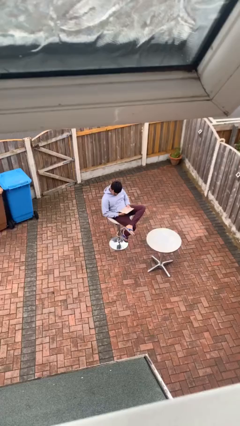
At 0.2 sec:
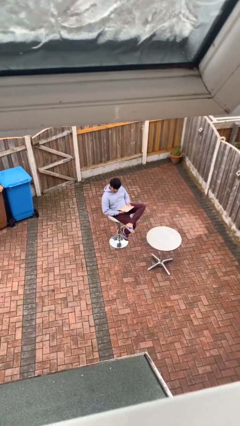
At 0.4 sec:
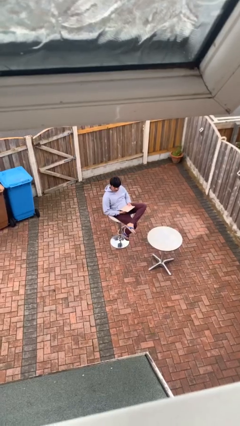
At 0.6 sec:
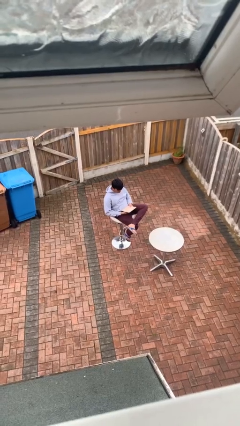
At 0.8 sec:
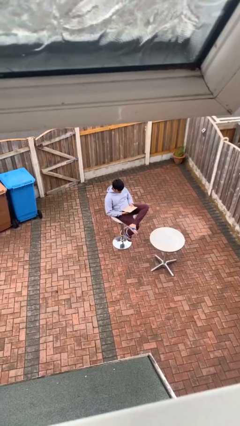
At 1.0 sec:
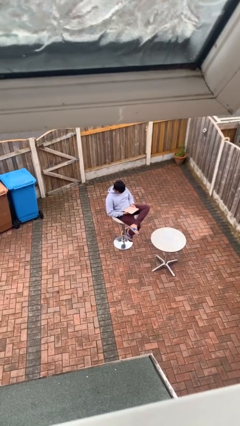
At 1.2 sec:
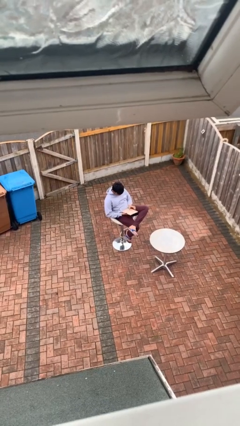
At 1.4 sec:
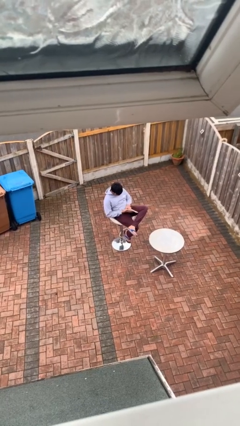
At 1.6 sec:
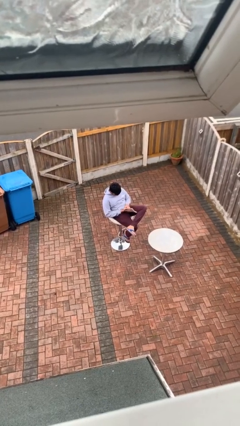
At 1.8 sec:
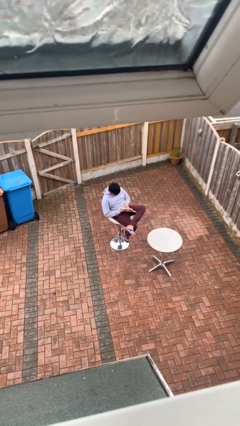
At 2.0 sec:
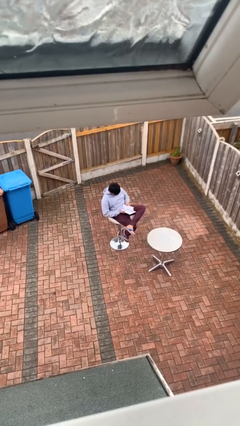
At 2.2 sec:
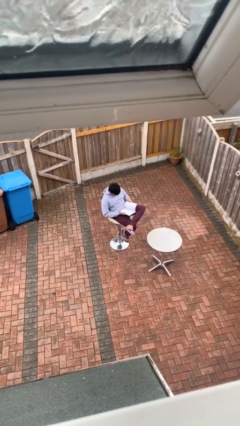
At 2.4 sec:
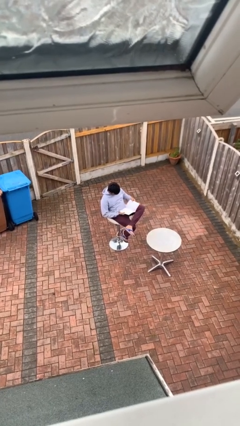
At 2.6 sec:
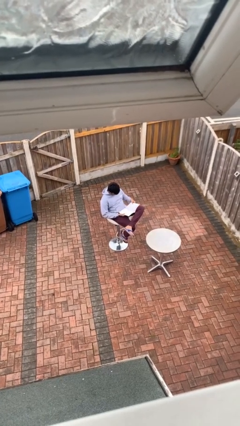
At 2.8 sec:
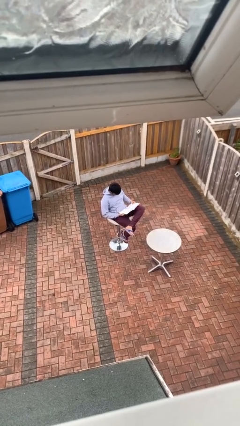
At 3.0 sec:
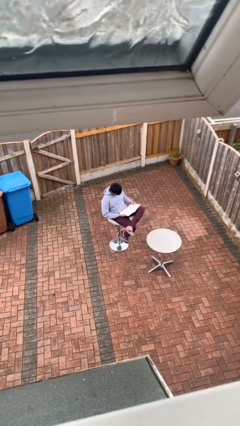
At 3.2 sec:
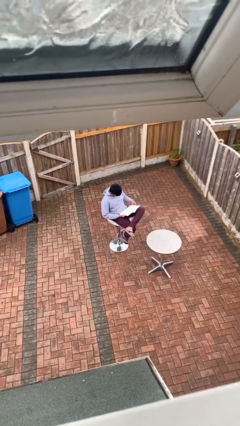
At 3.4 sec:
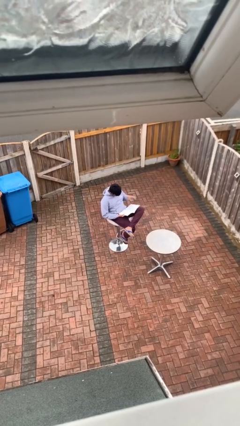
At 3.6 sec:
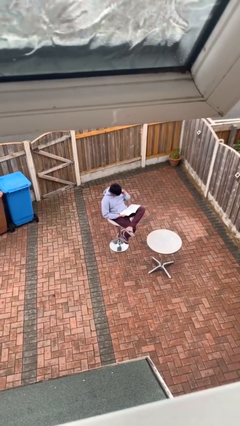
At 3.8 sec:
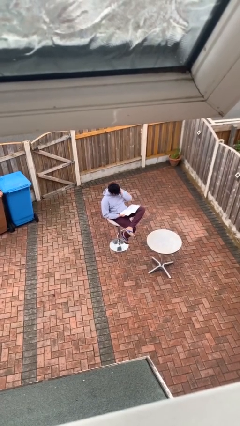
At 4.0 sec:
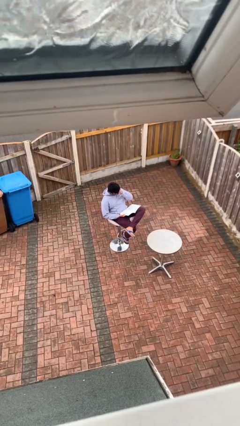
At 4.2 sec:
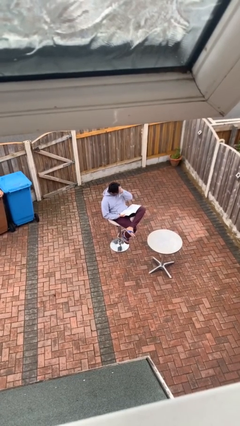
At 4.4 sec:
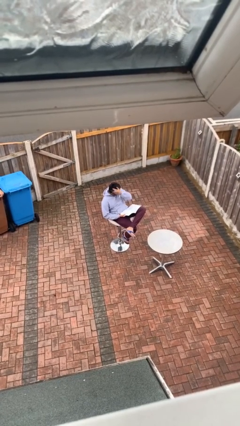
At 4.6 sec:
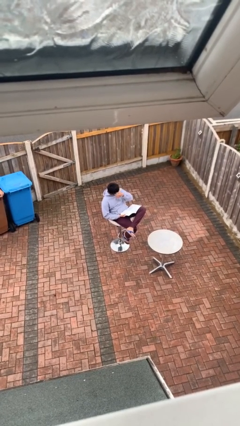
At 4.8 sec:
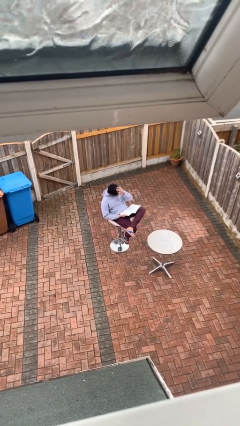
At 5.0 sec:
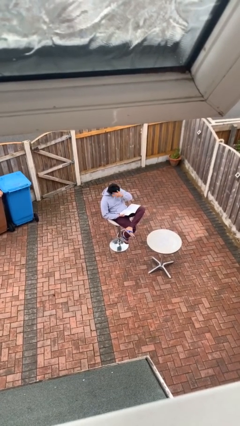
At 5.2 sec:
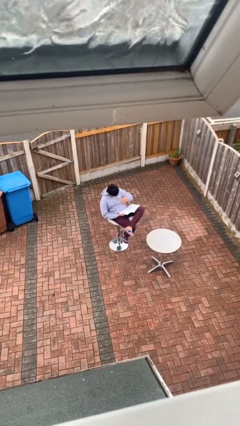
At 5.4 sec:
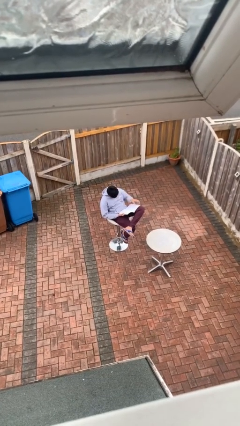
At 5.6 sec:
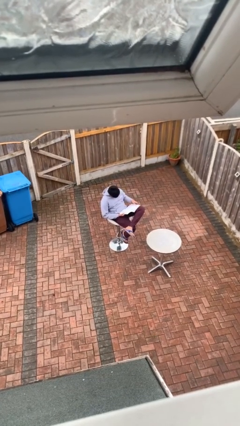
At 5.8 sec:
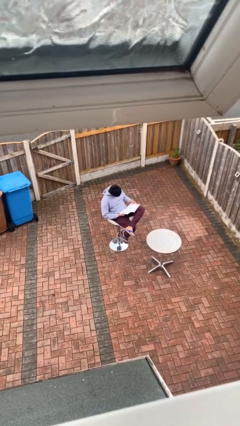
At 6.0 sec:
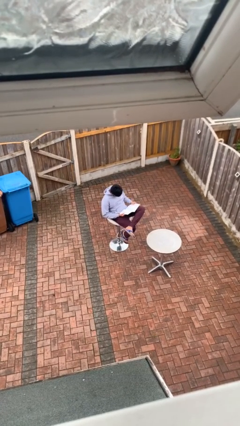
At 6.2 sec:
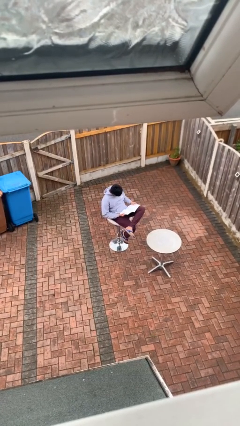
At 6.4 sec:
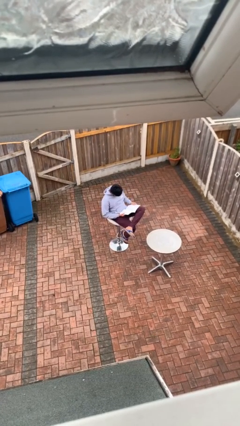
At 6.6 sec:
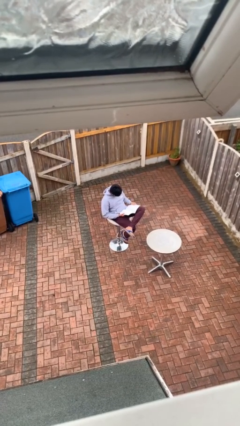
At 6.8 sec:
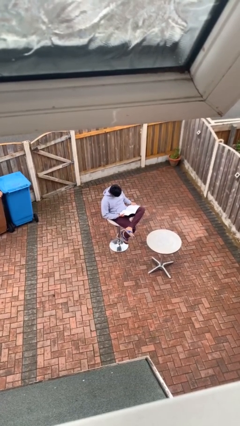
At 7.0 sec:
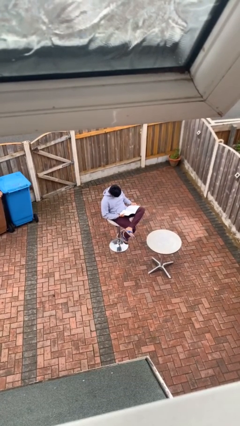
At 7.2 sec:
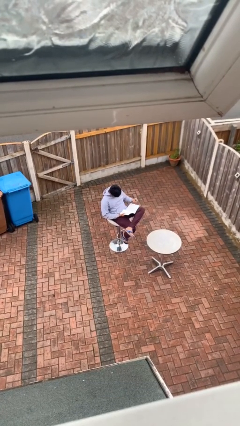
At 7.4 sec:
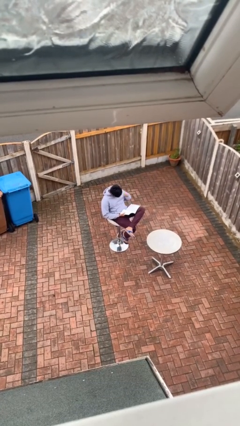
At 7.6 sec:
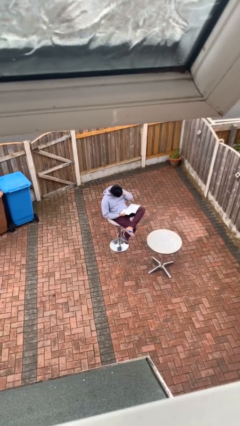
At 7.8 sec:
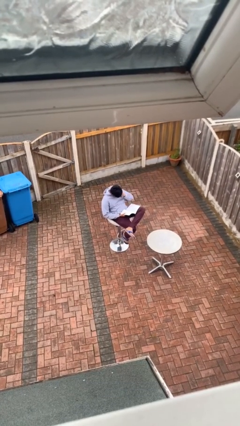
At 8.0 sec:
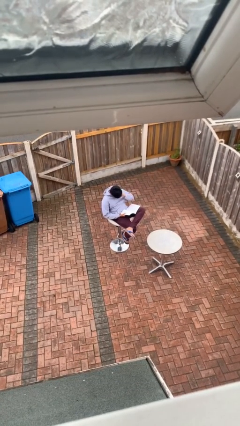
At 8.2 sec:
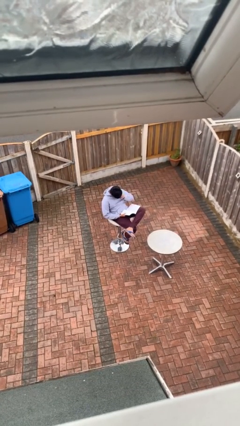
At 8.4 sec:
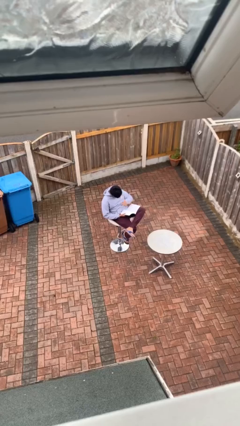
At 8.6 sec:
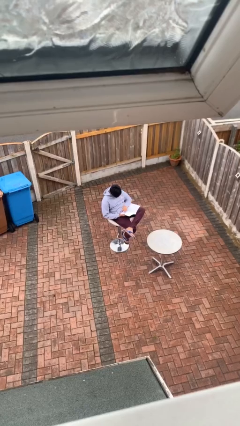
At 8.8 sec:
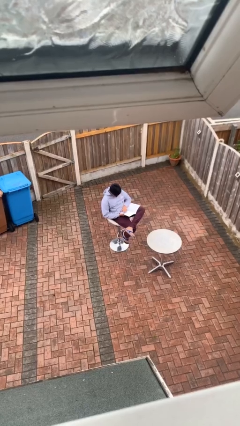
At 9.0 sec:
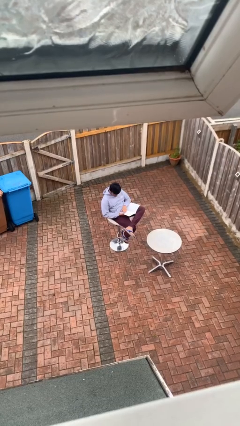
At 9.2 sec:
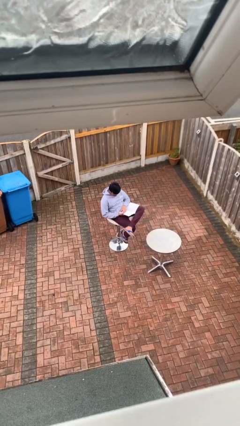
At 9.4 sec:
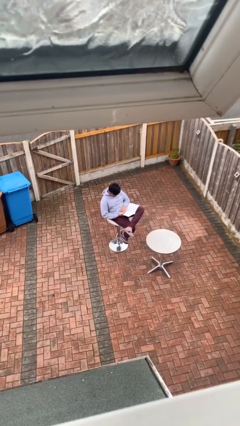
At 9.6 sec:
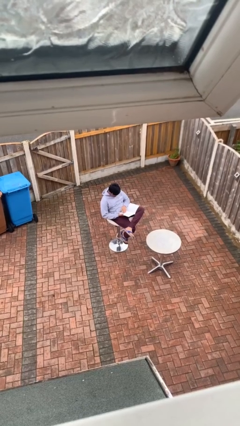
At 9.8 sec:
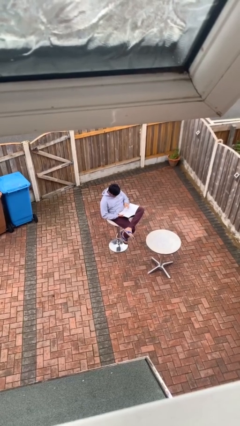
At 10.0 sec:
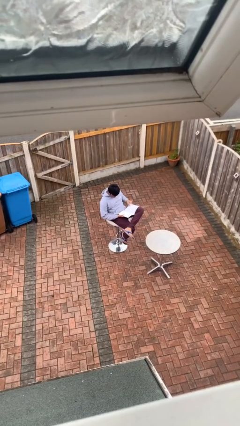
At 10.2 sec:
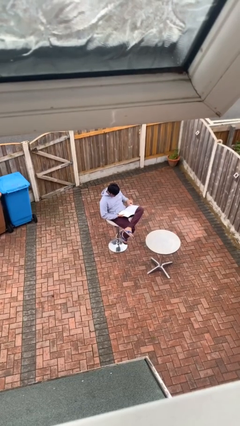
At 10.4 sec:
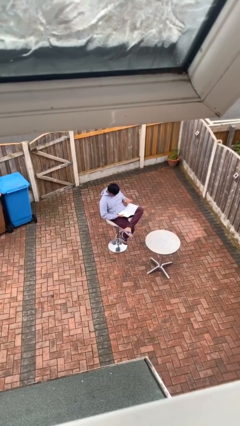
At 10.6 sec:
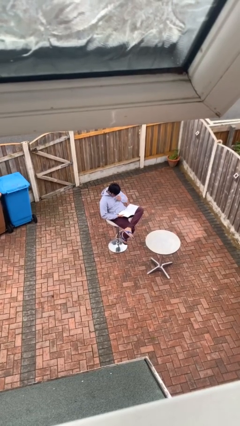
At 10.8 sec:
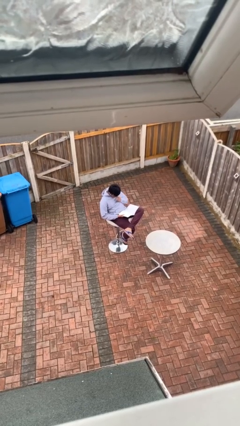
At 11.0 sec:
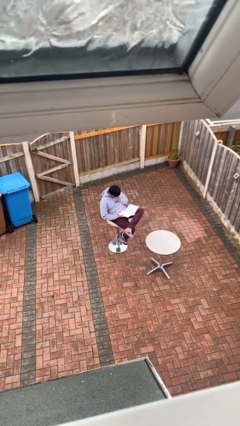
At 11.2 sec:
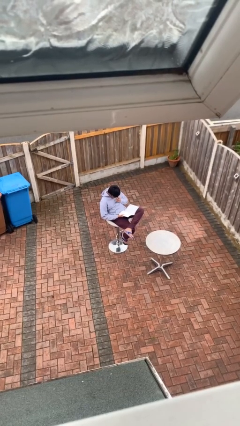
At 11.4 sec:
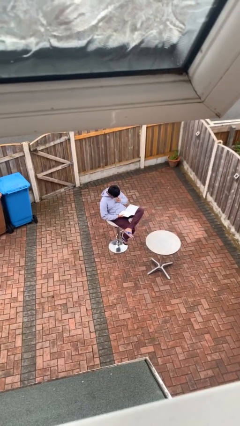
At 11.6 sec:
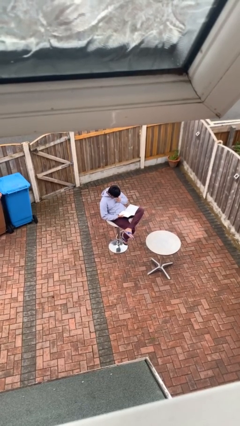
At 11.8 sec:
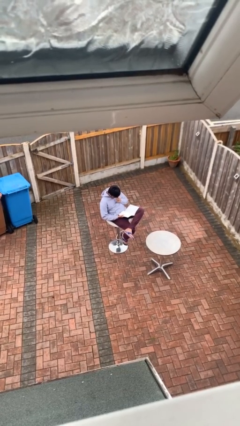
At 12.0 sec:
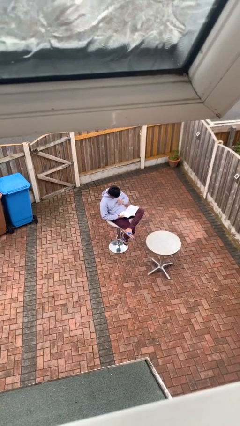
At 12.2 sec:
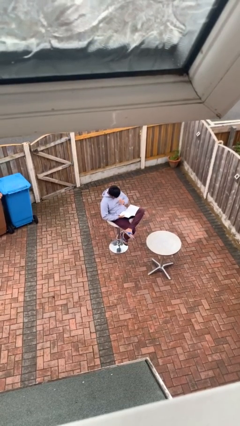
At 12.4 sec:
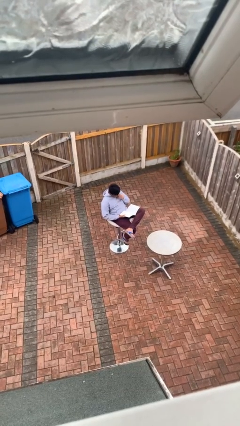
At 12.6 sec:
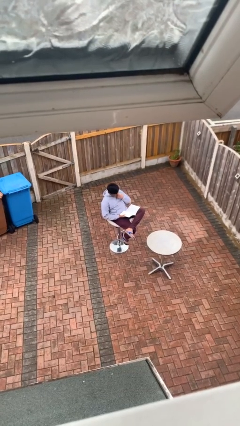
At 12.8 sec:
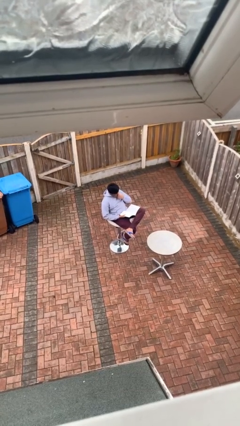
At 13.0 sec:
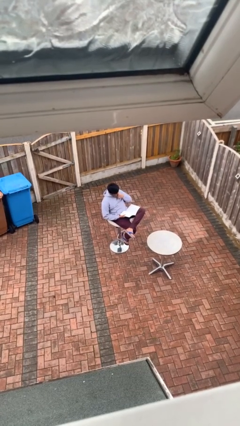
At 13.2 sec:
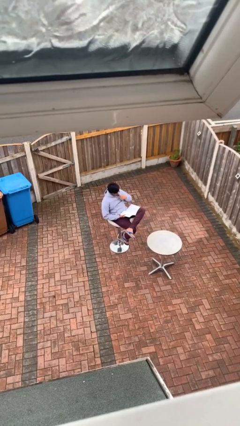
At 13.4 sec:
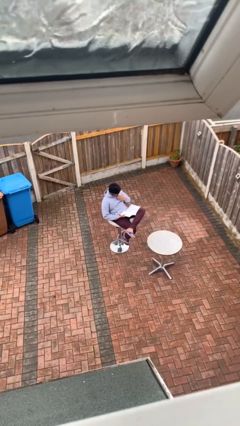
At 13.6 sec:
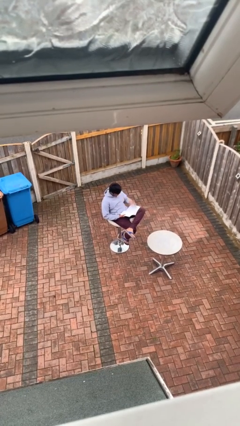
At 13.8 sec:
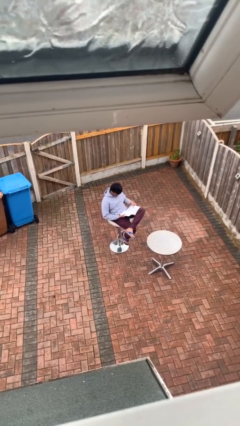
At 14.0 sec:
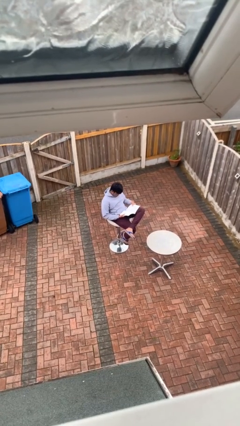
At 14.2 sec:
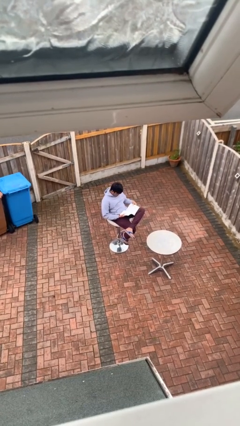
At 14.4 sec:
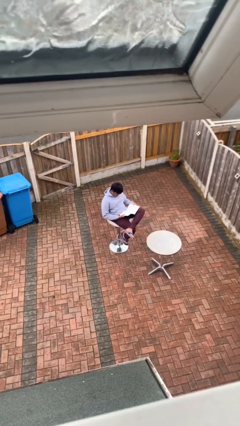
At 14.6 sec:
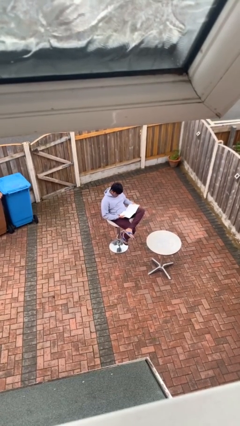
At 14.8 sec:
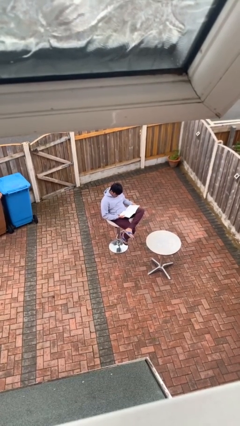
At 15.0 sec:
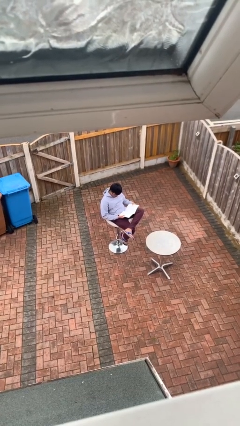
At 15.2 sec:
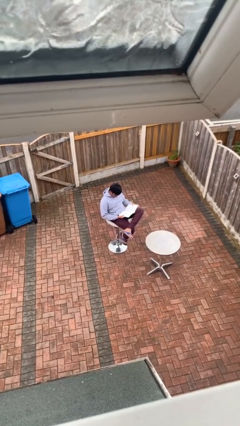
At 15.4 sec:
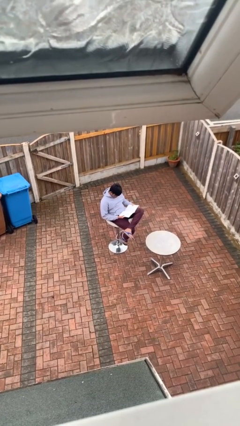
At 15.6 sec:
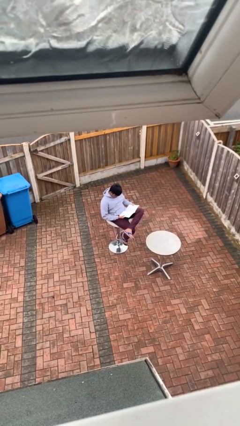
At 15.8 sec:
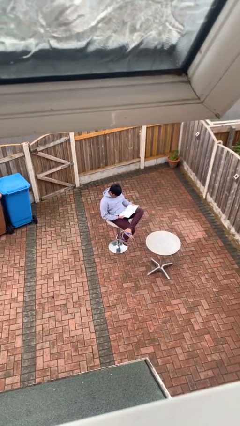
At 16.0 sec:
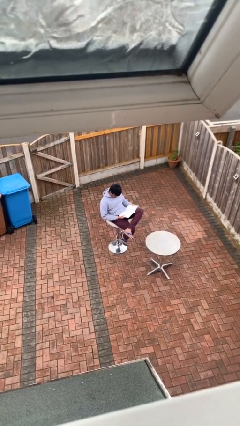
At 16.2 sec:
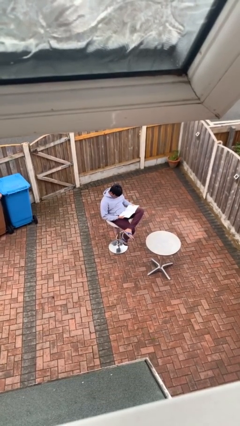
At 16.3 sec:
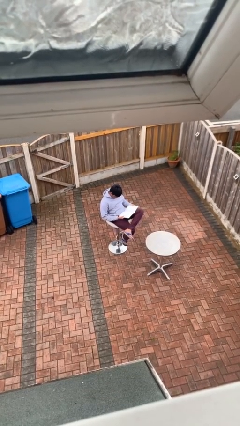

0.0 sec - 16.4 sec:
person reads document

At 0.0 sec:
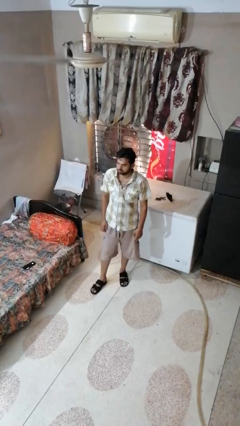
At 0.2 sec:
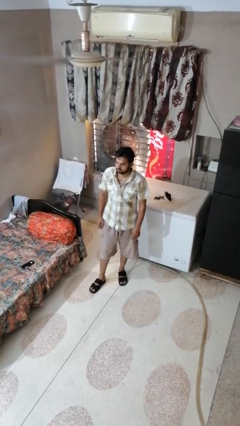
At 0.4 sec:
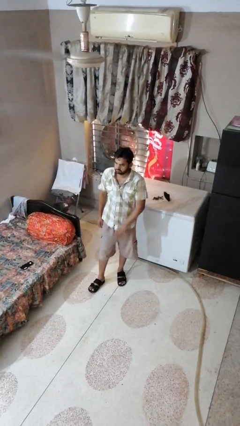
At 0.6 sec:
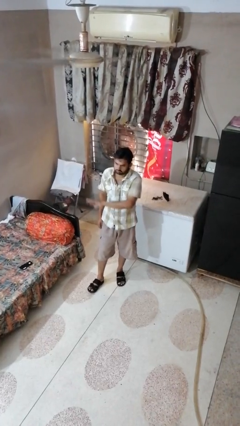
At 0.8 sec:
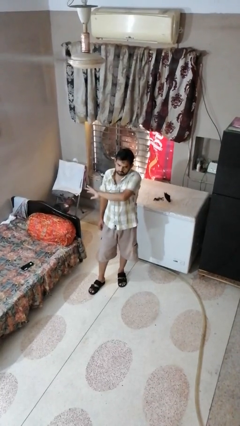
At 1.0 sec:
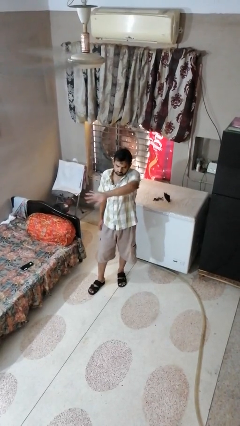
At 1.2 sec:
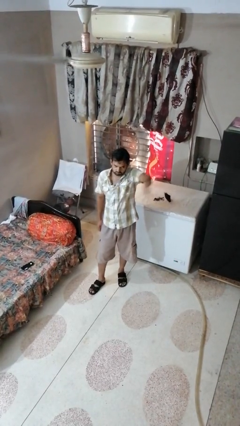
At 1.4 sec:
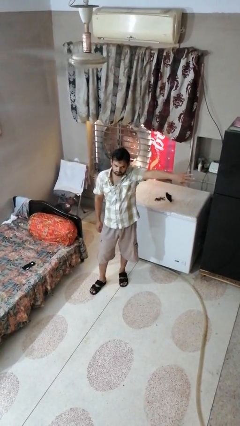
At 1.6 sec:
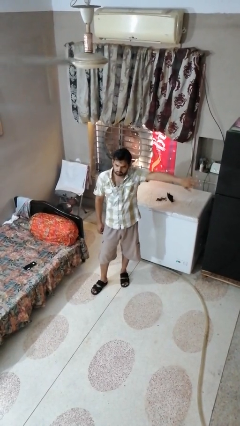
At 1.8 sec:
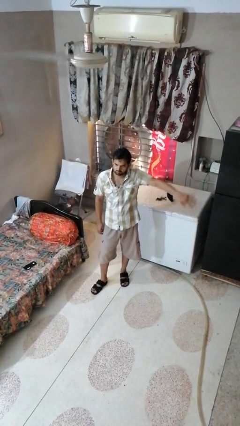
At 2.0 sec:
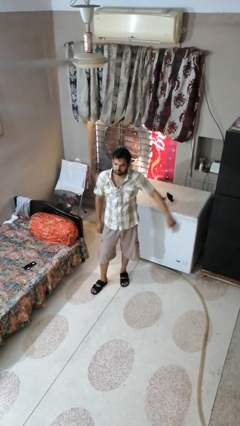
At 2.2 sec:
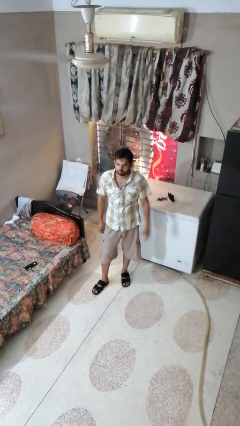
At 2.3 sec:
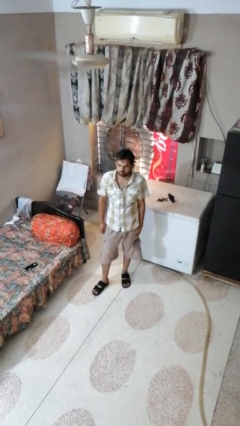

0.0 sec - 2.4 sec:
person gestures swipe left
